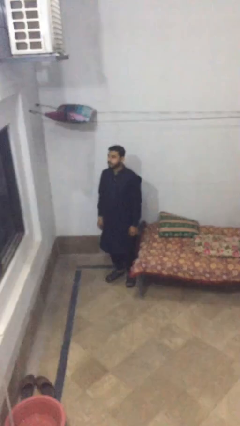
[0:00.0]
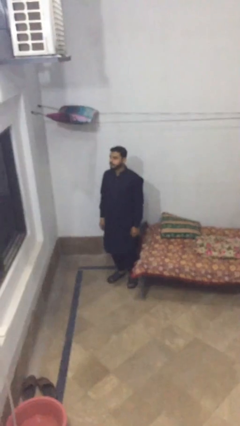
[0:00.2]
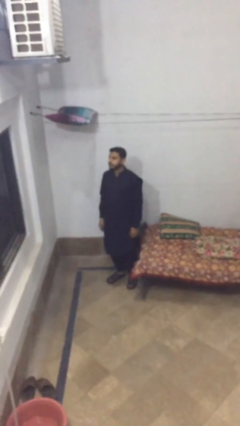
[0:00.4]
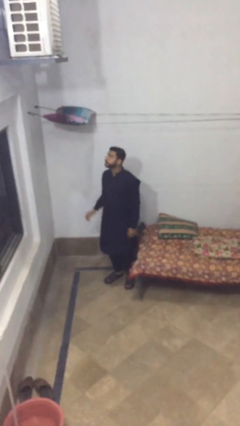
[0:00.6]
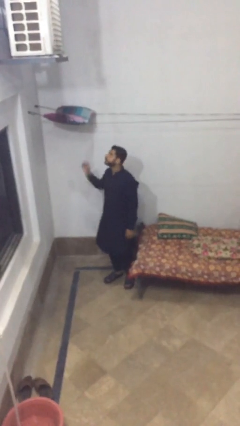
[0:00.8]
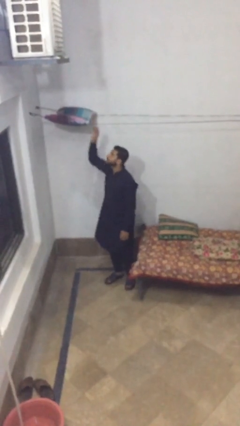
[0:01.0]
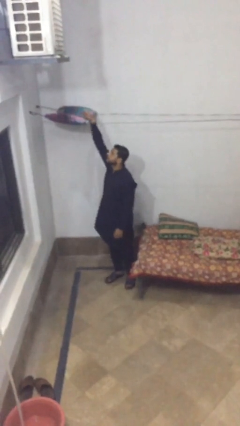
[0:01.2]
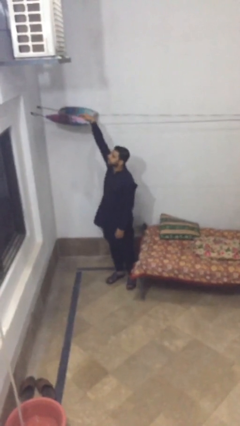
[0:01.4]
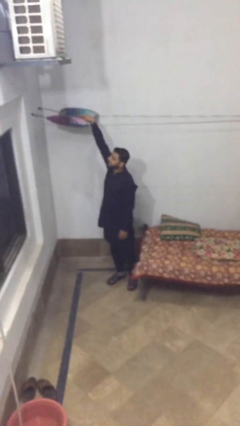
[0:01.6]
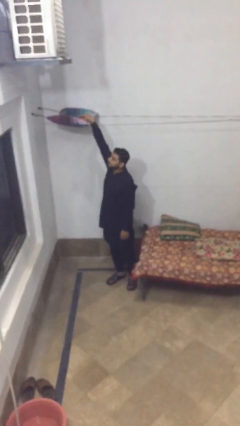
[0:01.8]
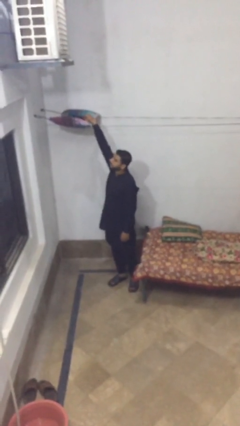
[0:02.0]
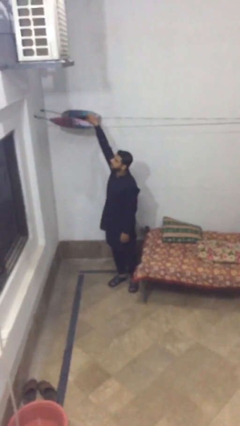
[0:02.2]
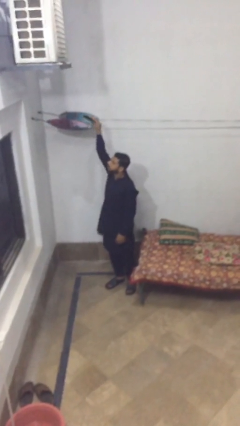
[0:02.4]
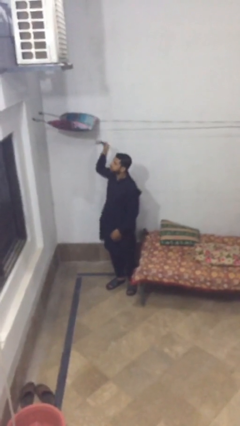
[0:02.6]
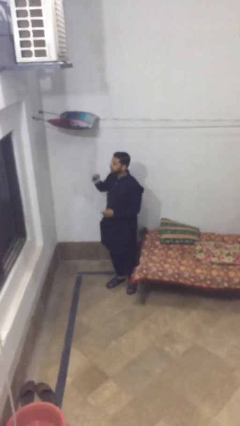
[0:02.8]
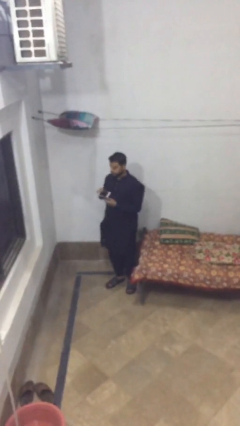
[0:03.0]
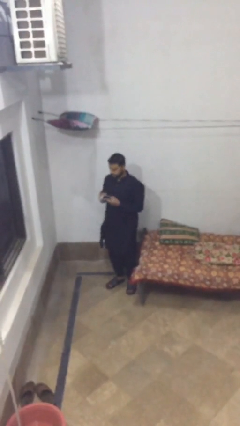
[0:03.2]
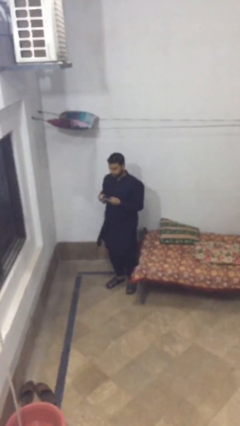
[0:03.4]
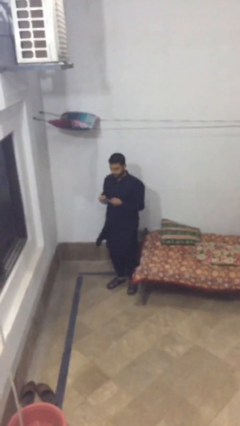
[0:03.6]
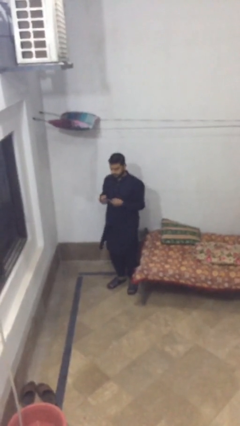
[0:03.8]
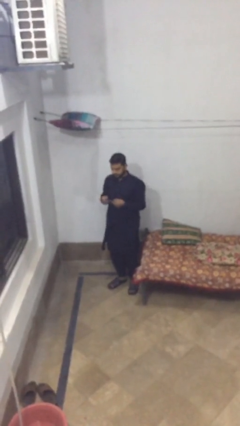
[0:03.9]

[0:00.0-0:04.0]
person picks up object from shelf

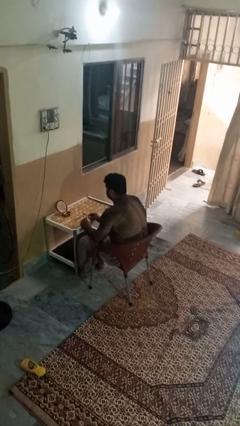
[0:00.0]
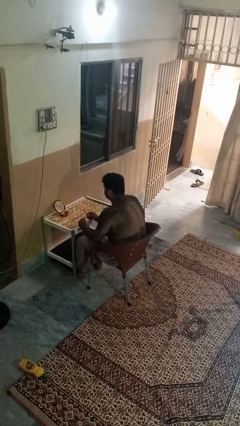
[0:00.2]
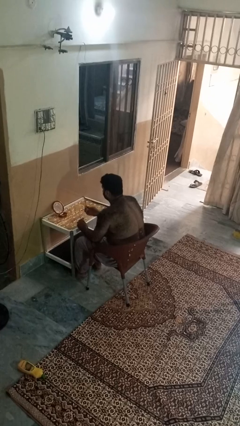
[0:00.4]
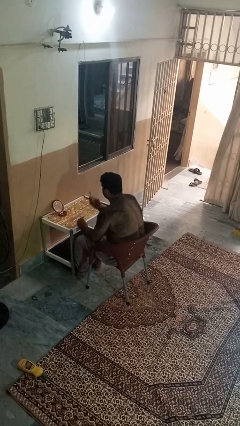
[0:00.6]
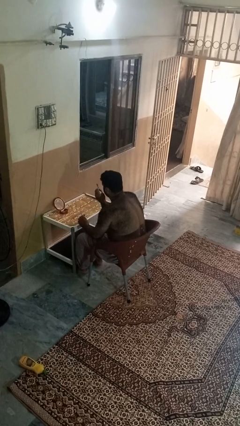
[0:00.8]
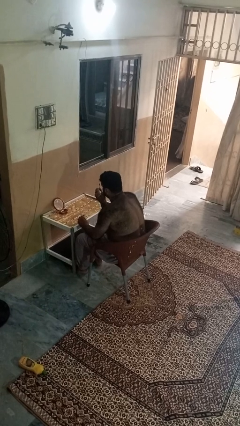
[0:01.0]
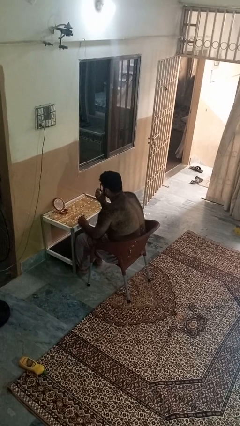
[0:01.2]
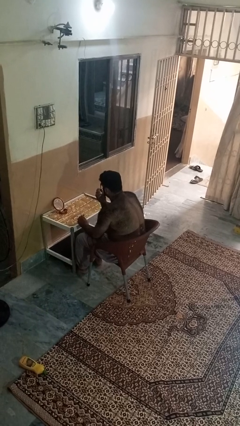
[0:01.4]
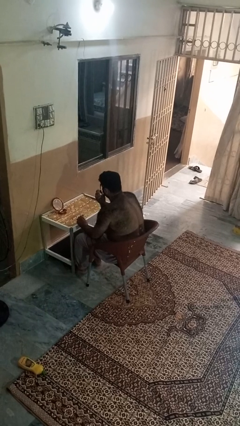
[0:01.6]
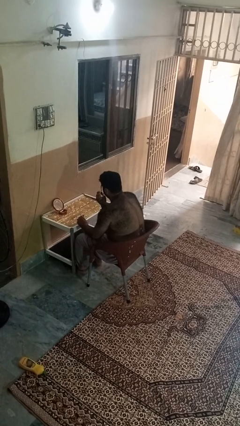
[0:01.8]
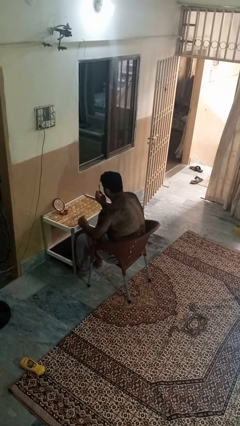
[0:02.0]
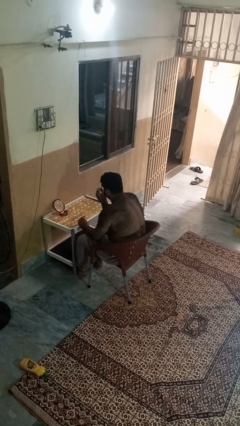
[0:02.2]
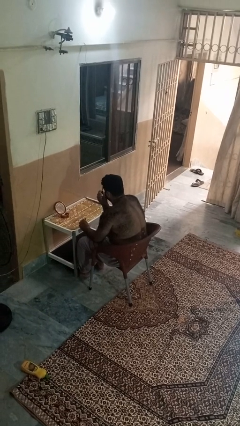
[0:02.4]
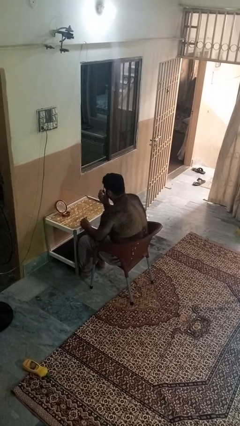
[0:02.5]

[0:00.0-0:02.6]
person applies eye makeup

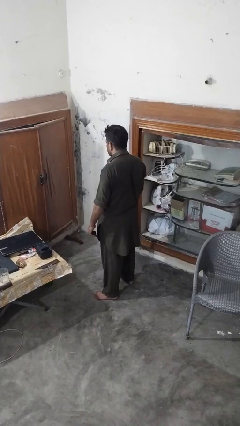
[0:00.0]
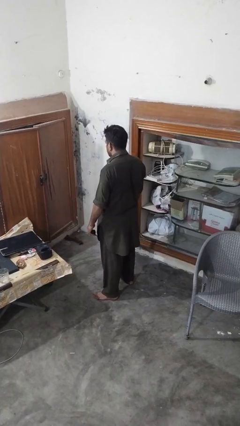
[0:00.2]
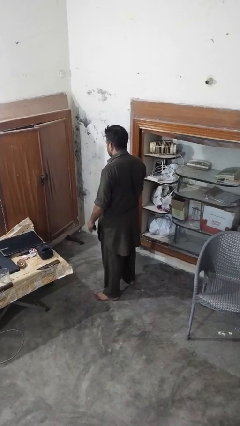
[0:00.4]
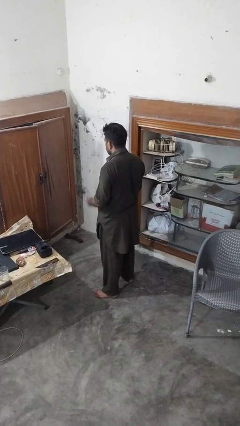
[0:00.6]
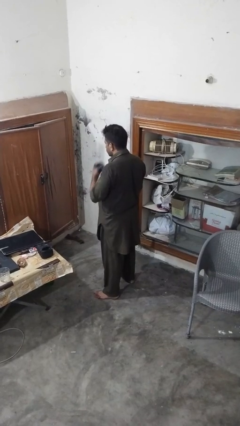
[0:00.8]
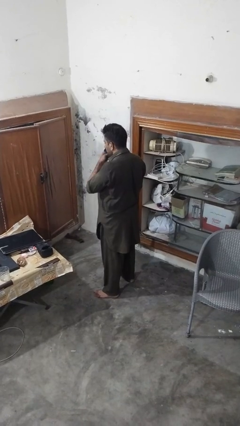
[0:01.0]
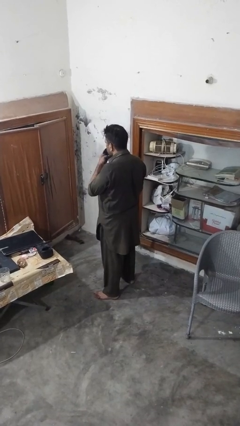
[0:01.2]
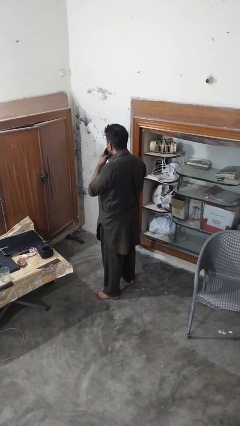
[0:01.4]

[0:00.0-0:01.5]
person wipes mouth with napkin

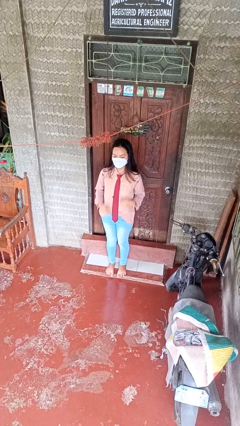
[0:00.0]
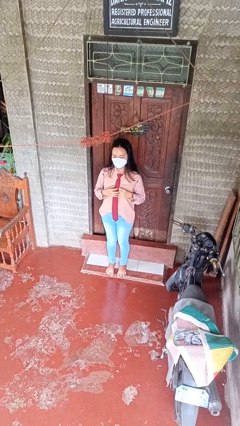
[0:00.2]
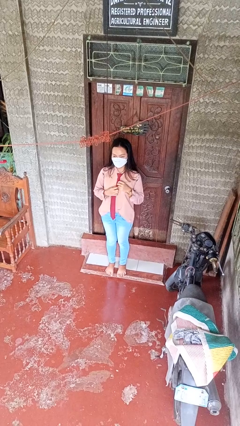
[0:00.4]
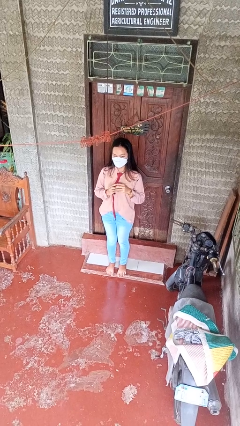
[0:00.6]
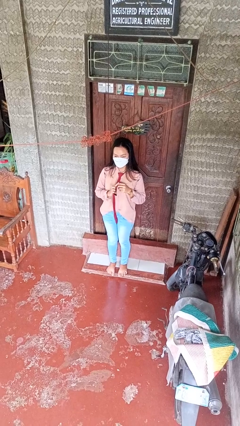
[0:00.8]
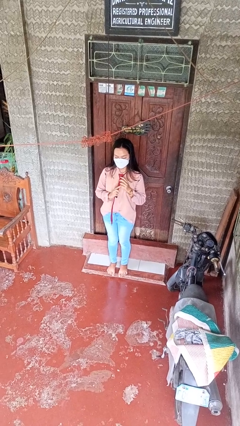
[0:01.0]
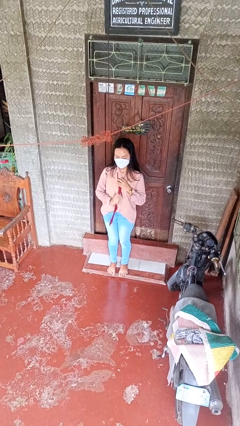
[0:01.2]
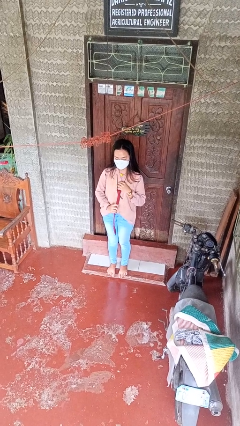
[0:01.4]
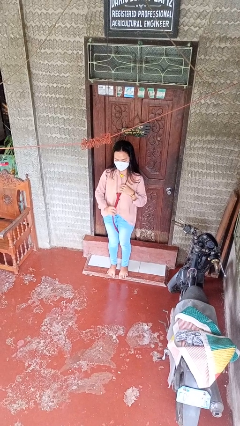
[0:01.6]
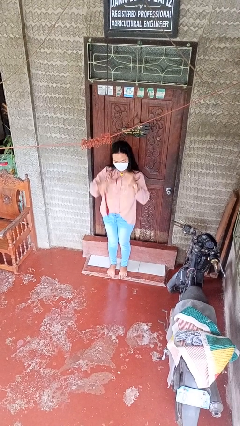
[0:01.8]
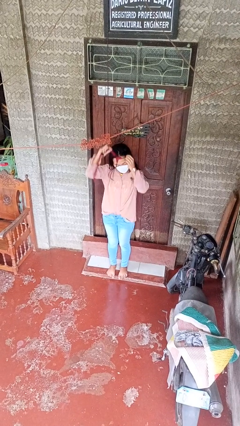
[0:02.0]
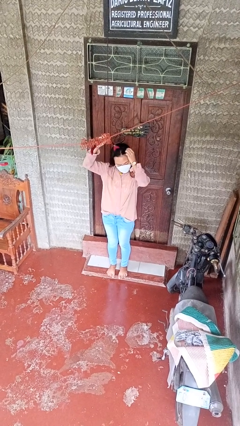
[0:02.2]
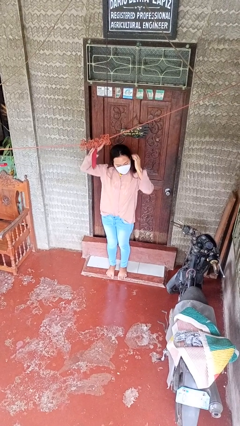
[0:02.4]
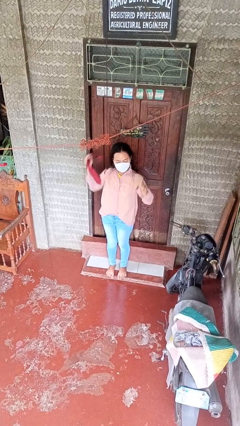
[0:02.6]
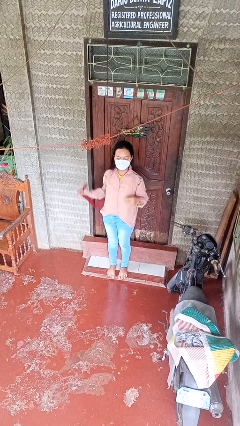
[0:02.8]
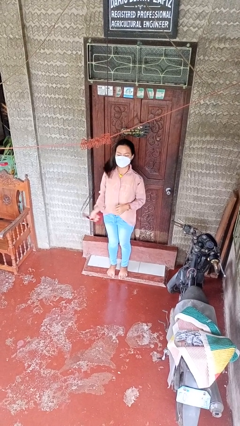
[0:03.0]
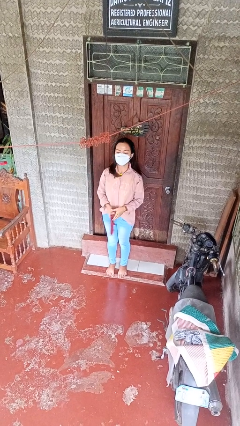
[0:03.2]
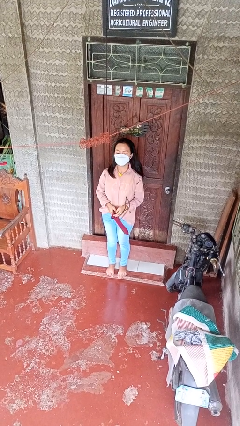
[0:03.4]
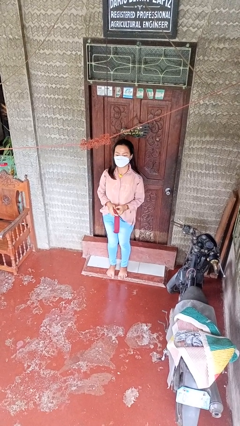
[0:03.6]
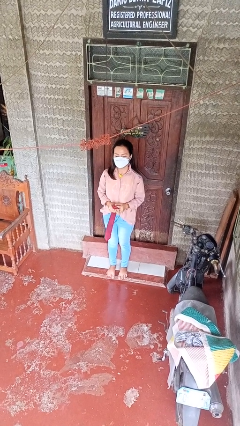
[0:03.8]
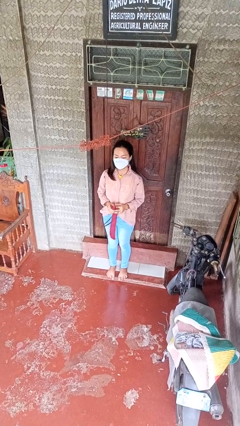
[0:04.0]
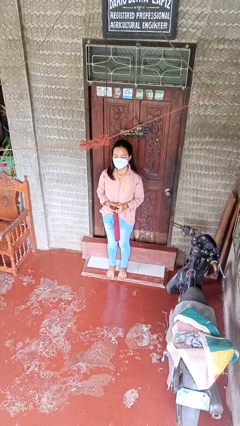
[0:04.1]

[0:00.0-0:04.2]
person takes off necktie

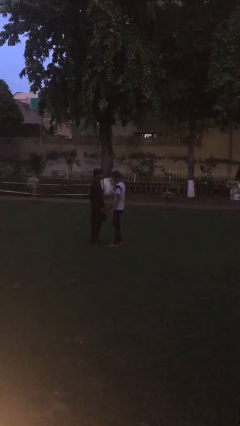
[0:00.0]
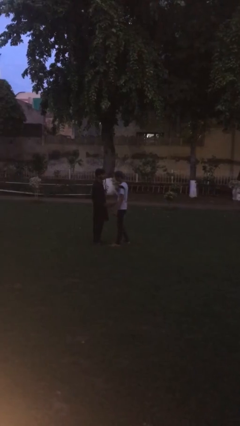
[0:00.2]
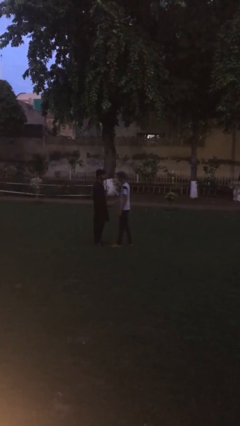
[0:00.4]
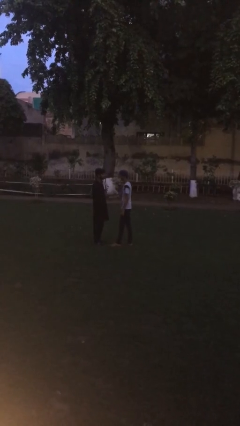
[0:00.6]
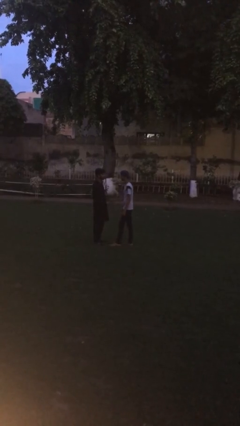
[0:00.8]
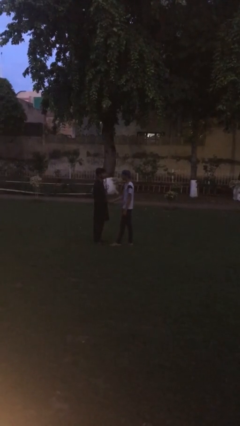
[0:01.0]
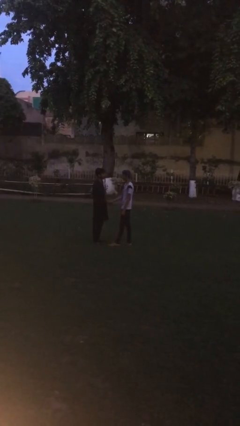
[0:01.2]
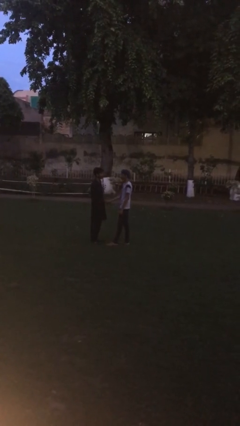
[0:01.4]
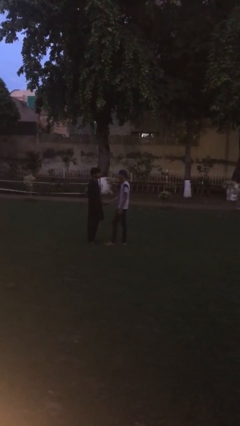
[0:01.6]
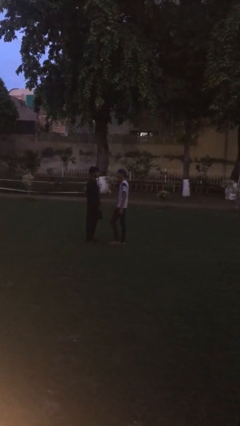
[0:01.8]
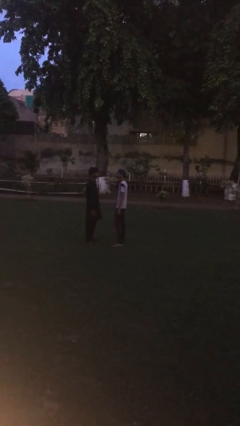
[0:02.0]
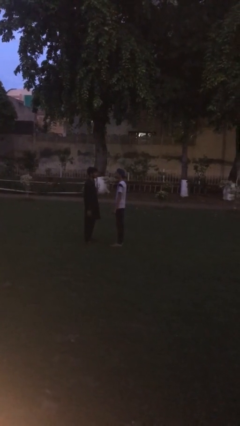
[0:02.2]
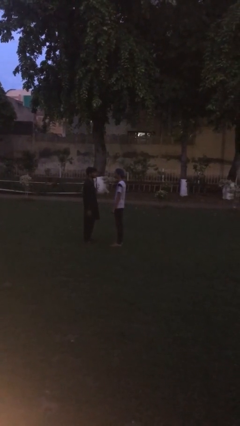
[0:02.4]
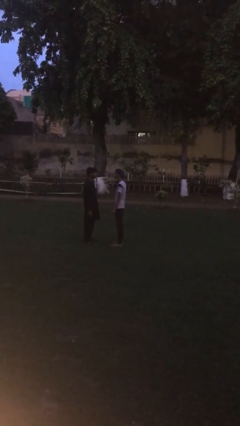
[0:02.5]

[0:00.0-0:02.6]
person shakes hand

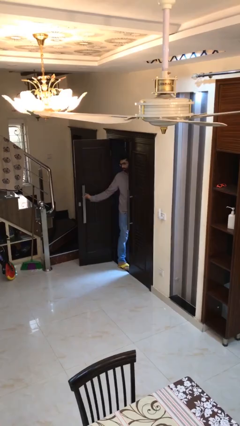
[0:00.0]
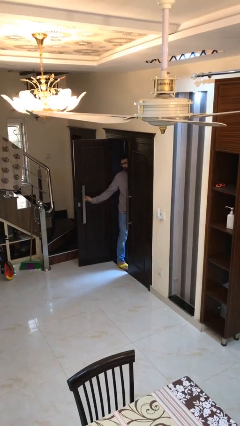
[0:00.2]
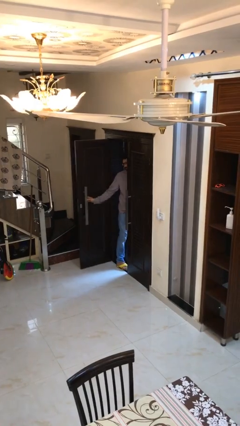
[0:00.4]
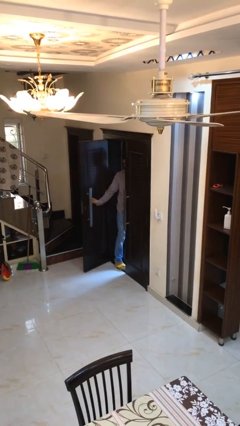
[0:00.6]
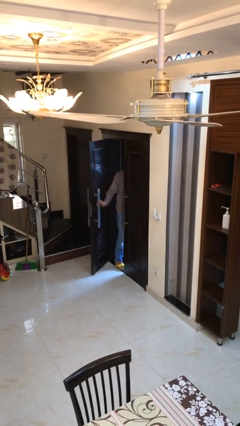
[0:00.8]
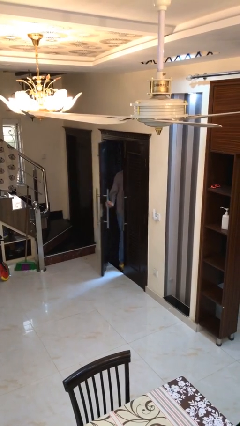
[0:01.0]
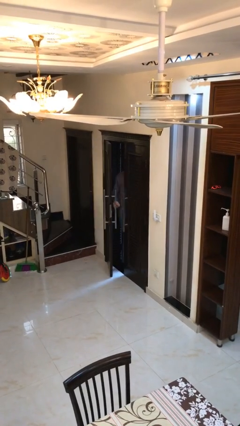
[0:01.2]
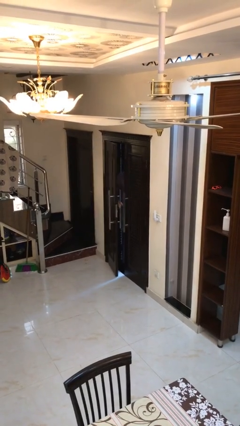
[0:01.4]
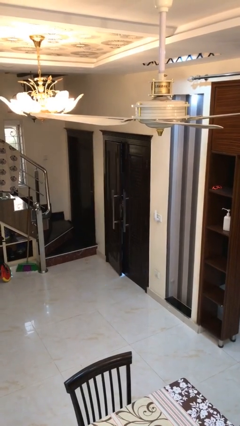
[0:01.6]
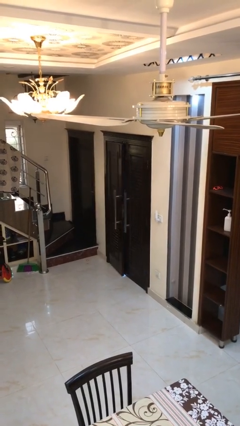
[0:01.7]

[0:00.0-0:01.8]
person closes facility door

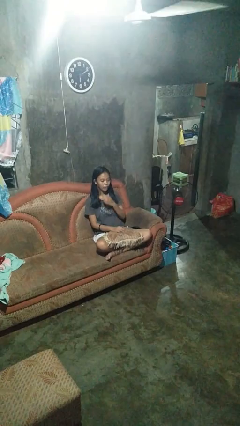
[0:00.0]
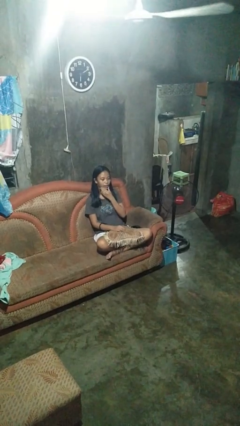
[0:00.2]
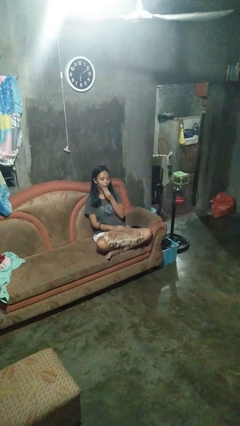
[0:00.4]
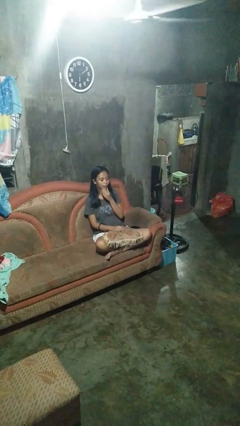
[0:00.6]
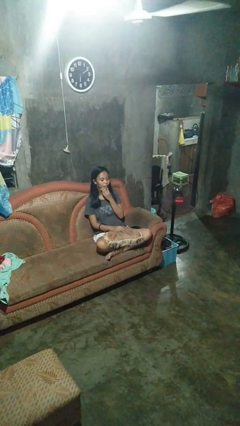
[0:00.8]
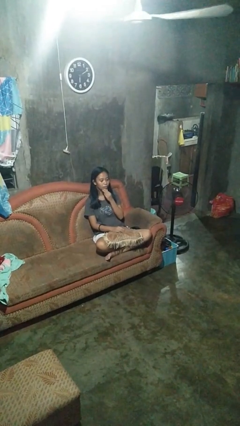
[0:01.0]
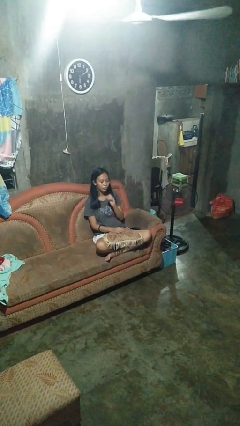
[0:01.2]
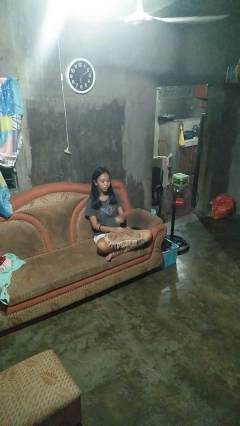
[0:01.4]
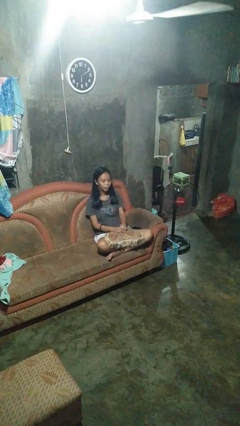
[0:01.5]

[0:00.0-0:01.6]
person strokes chin
